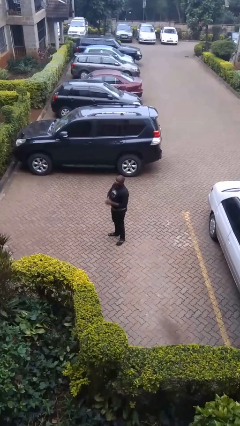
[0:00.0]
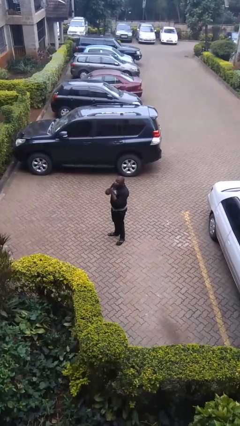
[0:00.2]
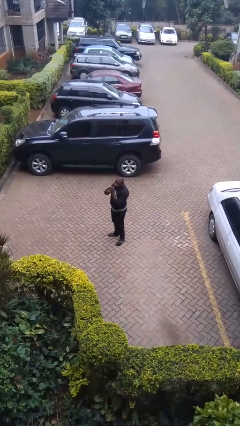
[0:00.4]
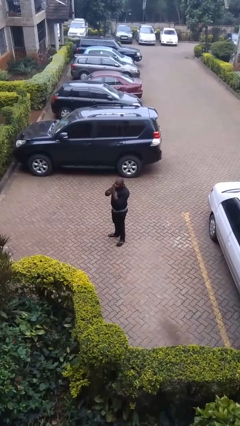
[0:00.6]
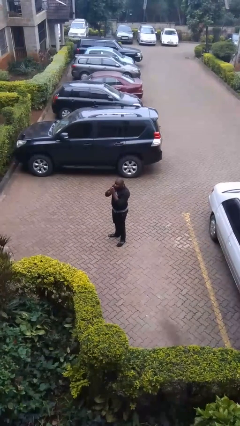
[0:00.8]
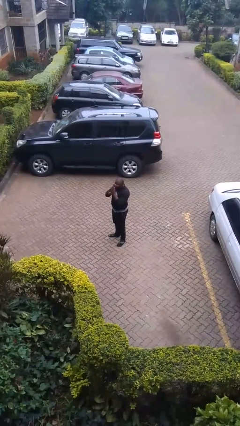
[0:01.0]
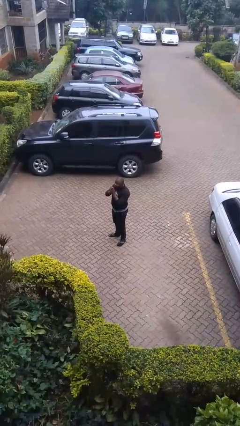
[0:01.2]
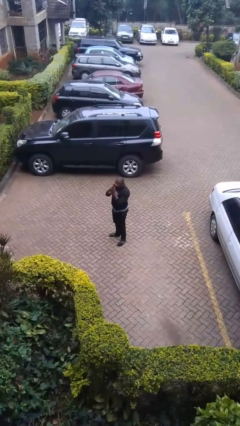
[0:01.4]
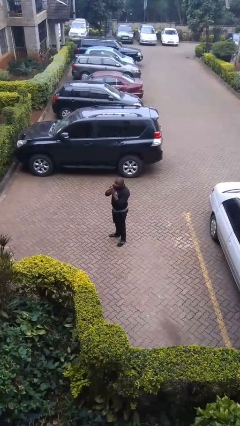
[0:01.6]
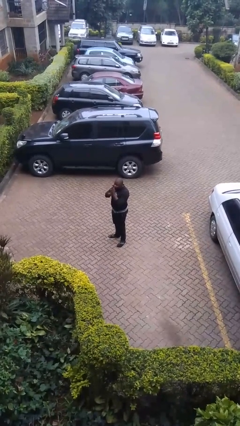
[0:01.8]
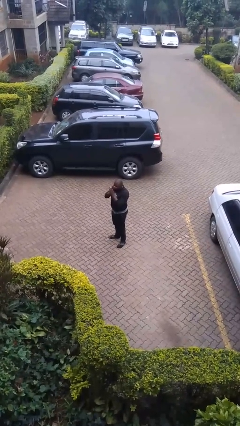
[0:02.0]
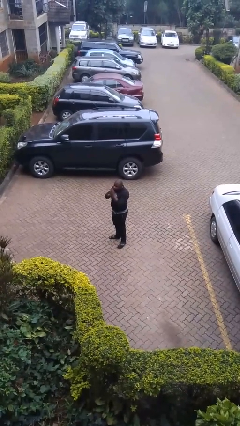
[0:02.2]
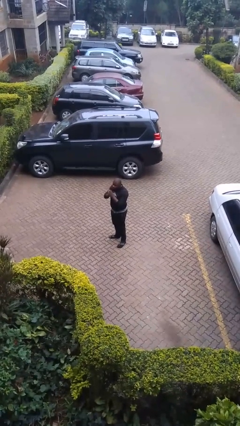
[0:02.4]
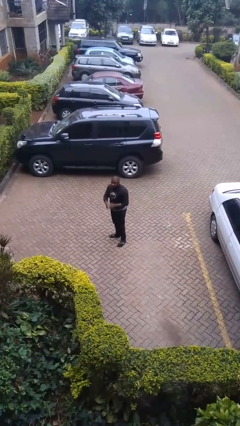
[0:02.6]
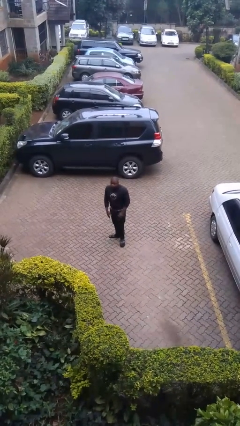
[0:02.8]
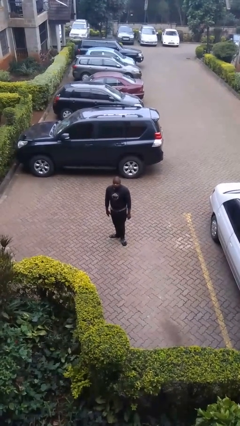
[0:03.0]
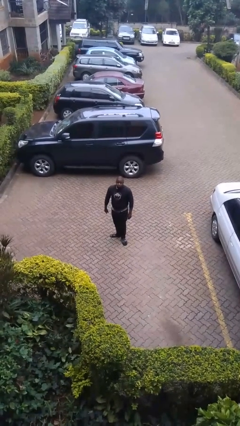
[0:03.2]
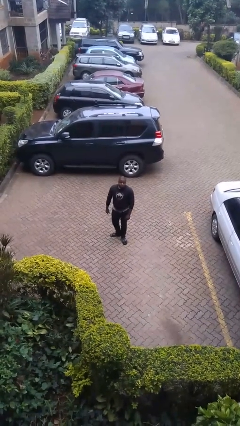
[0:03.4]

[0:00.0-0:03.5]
person blows into hands

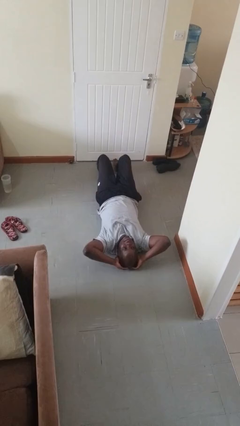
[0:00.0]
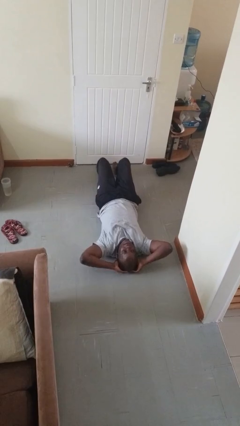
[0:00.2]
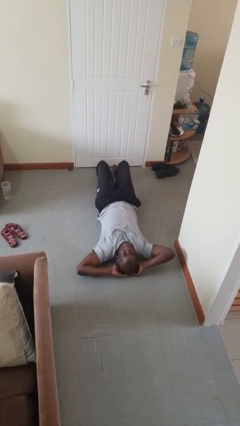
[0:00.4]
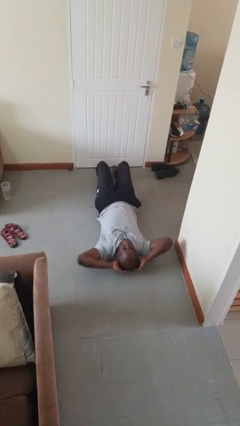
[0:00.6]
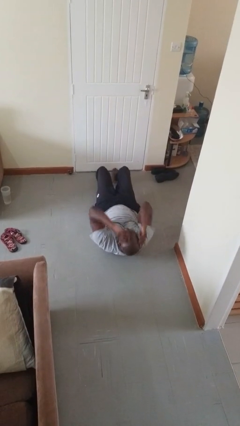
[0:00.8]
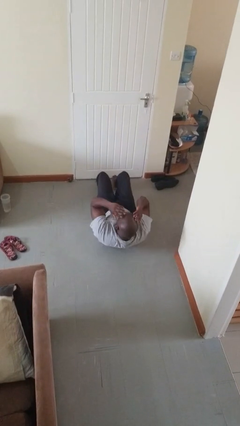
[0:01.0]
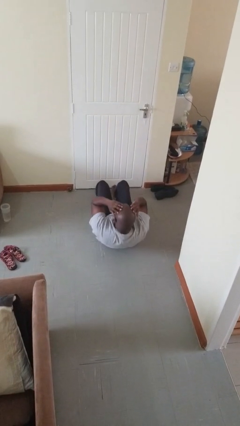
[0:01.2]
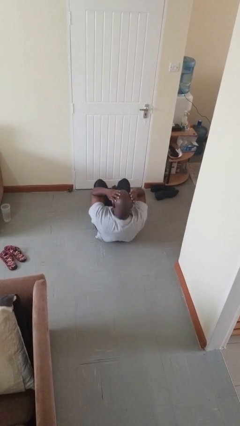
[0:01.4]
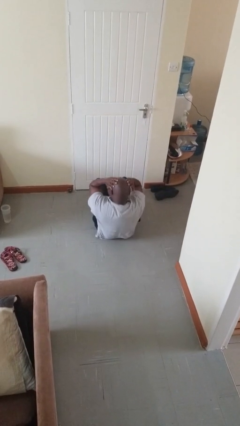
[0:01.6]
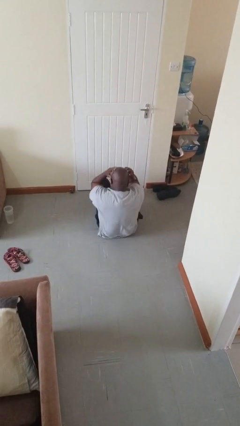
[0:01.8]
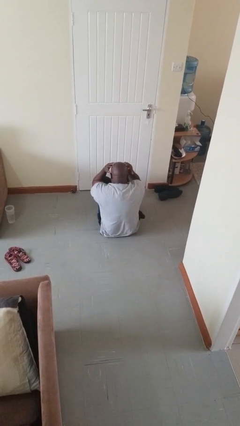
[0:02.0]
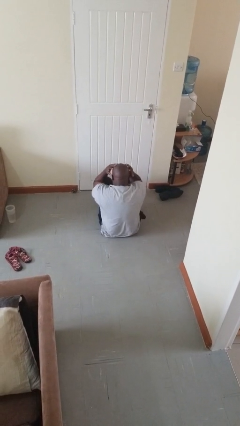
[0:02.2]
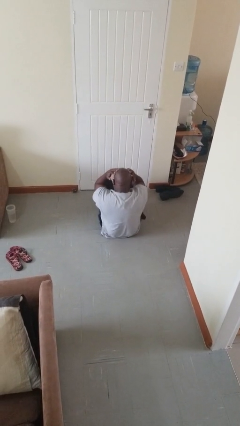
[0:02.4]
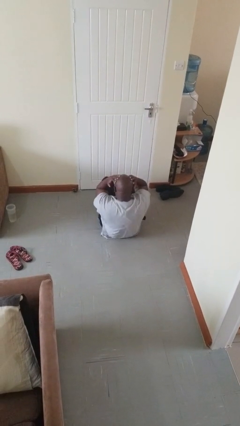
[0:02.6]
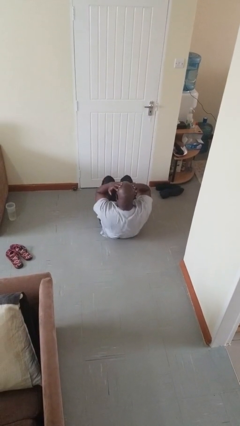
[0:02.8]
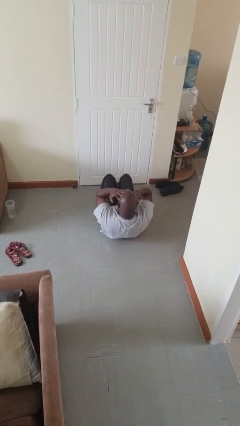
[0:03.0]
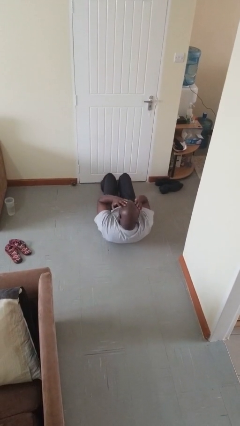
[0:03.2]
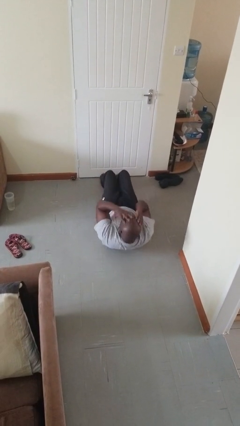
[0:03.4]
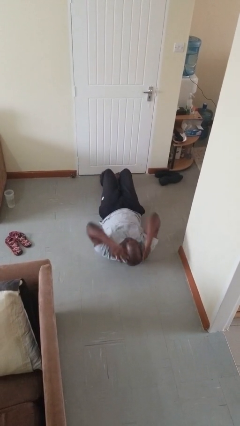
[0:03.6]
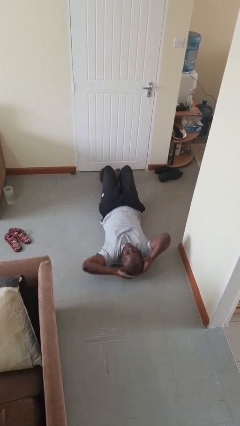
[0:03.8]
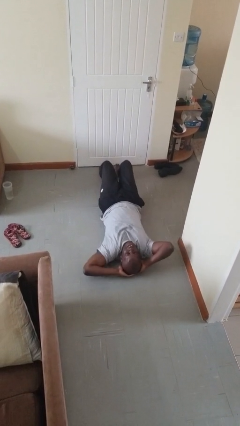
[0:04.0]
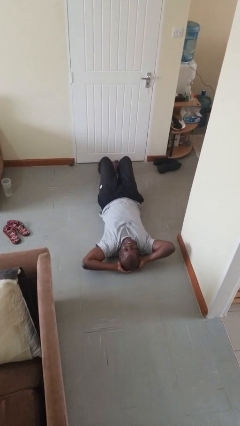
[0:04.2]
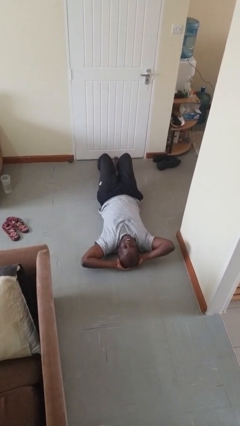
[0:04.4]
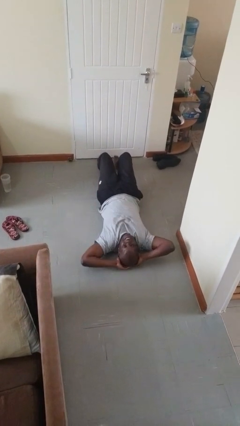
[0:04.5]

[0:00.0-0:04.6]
person exercises with situp

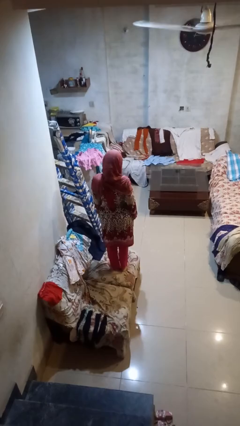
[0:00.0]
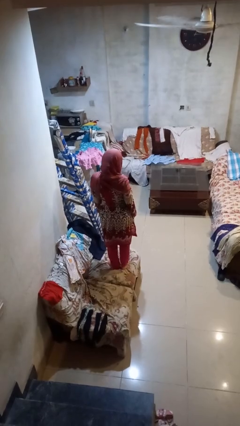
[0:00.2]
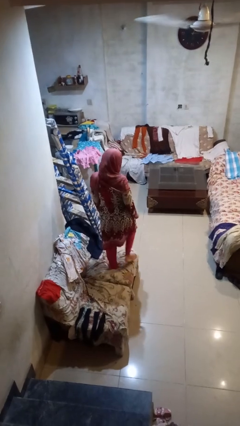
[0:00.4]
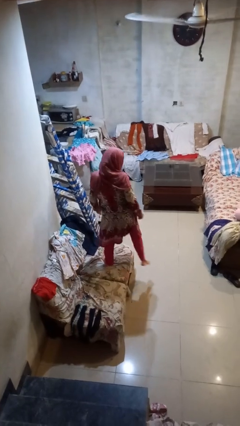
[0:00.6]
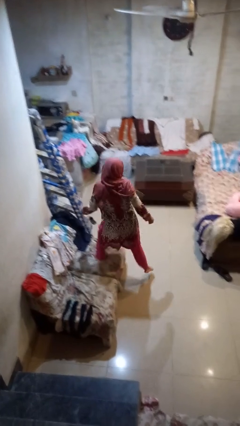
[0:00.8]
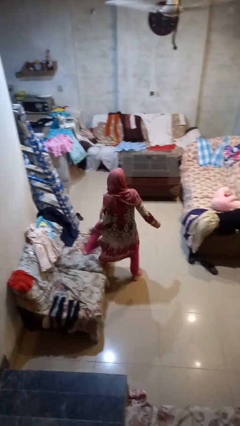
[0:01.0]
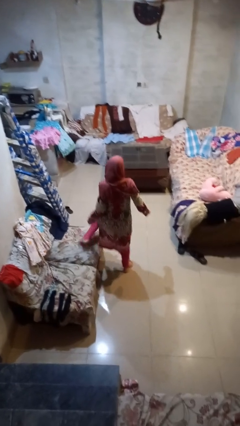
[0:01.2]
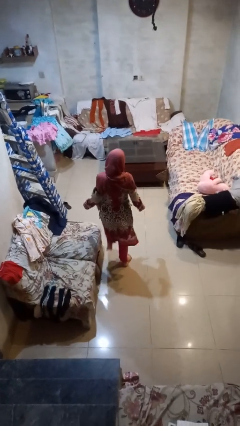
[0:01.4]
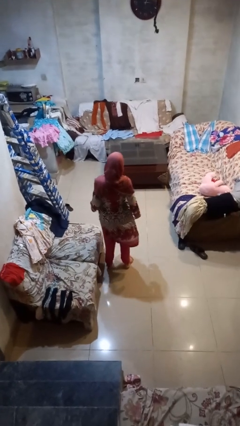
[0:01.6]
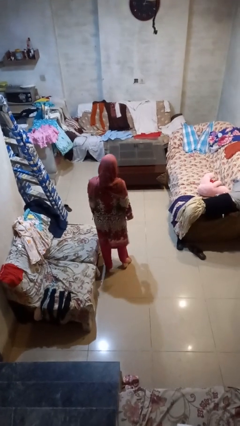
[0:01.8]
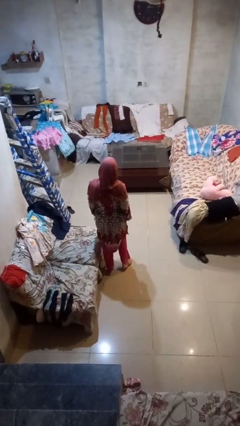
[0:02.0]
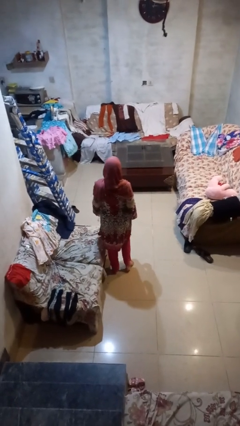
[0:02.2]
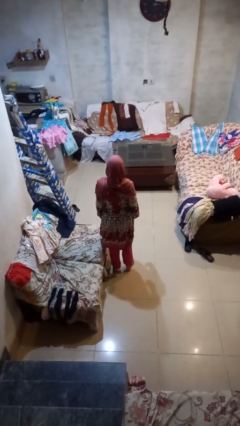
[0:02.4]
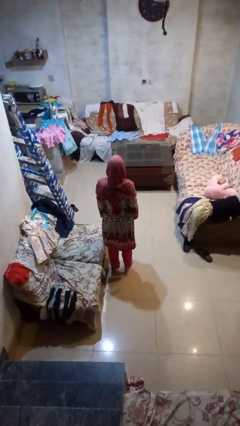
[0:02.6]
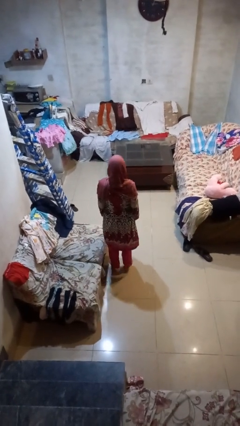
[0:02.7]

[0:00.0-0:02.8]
person climbs off couch

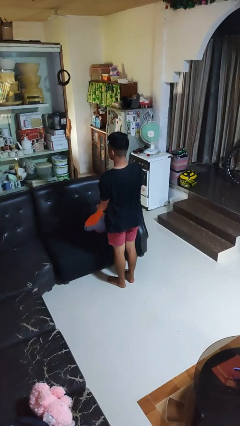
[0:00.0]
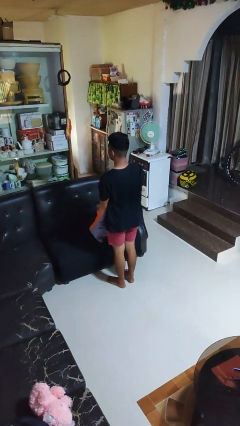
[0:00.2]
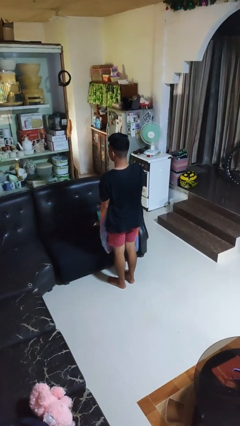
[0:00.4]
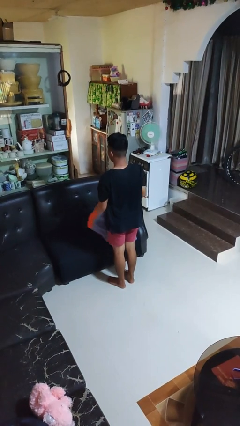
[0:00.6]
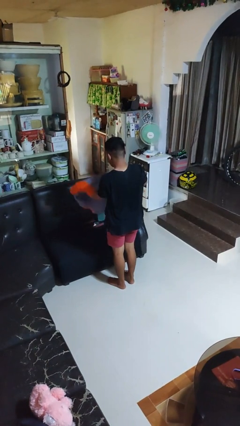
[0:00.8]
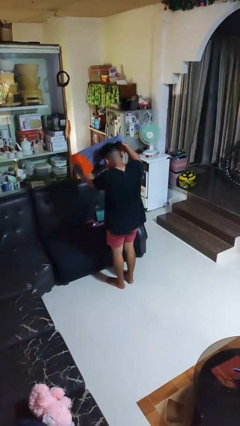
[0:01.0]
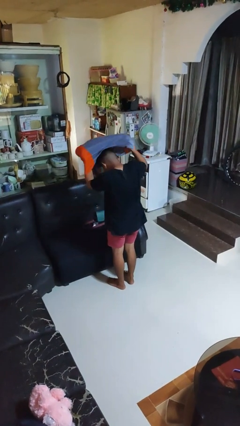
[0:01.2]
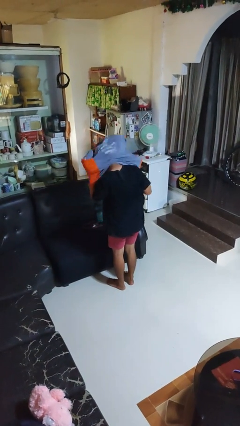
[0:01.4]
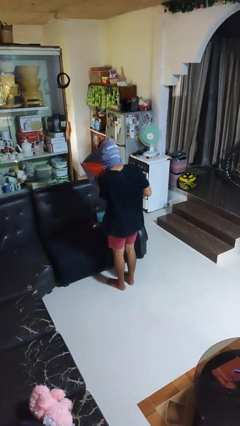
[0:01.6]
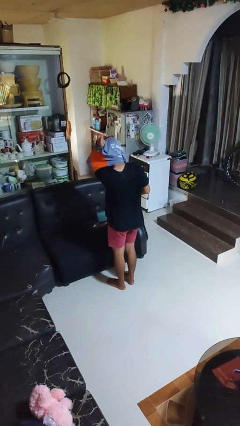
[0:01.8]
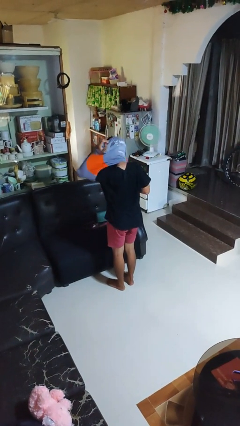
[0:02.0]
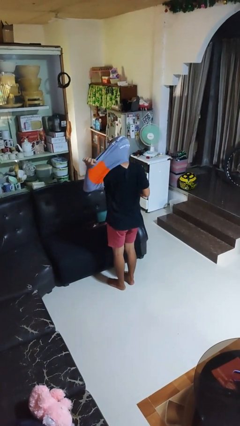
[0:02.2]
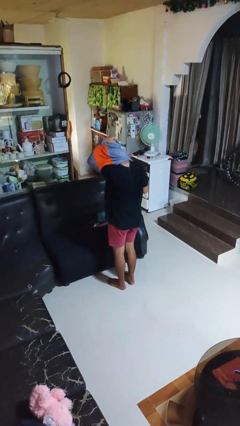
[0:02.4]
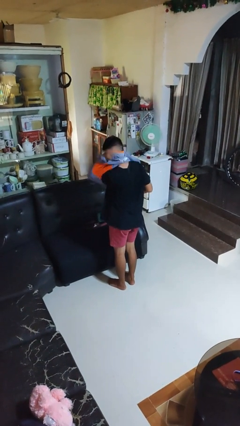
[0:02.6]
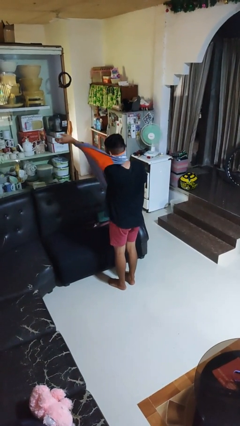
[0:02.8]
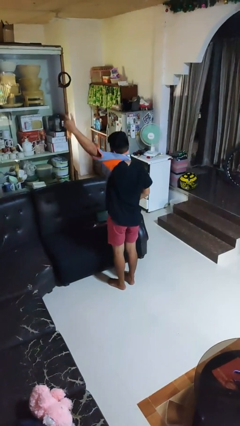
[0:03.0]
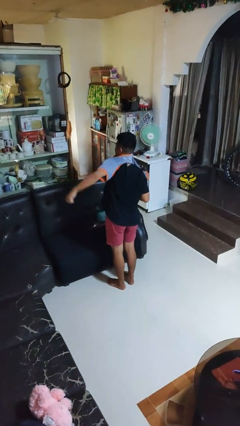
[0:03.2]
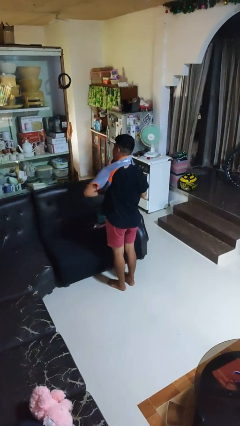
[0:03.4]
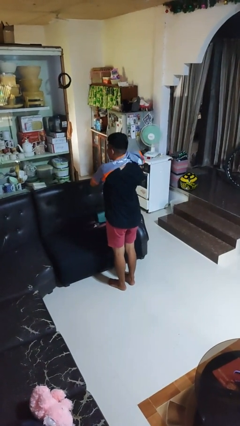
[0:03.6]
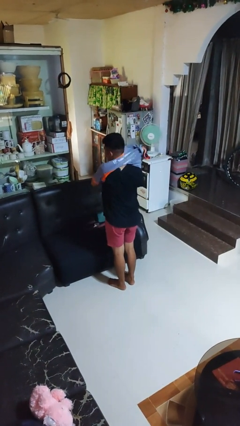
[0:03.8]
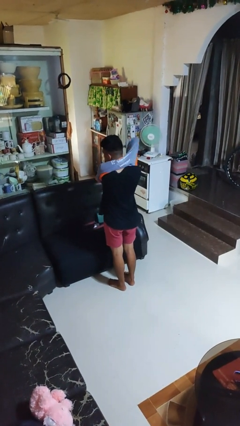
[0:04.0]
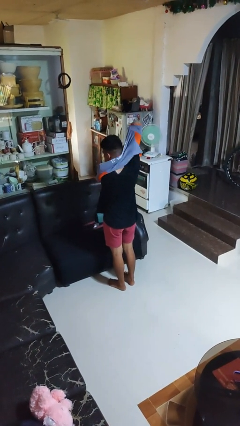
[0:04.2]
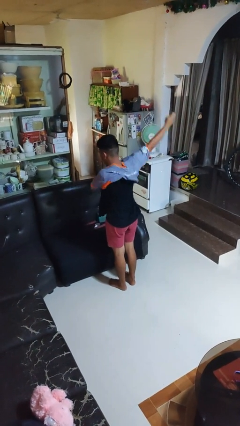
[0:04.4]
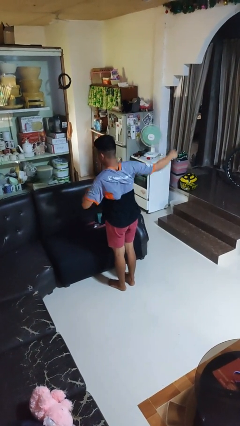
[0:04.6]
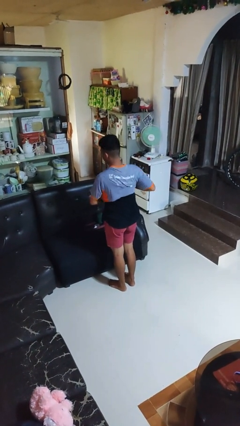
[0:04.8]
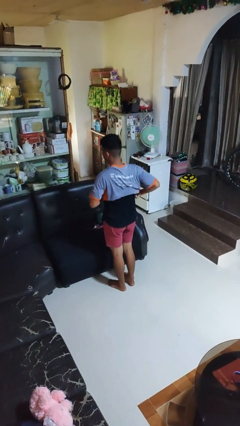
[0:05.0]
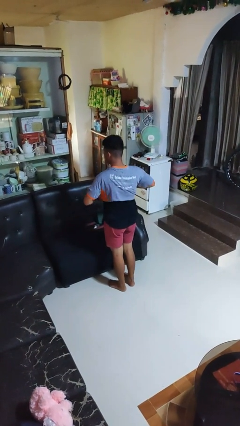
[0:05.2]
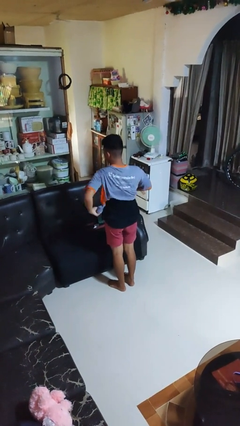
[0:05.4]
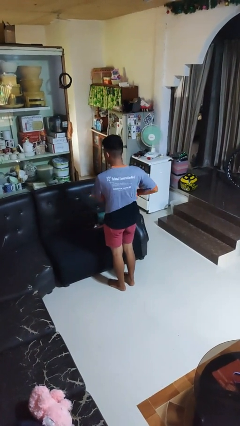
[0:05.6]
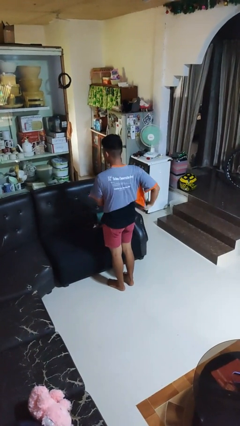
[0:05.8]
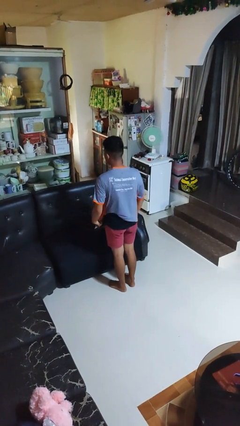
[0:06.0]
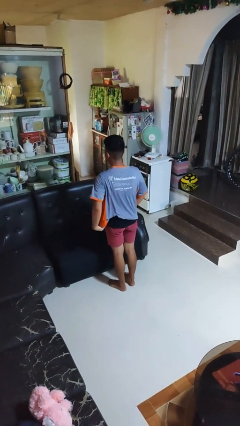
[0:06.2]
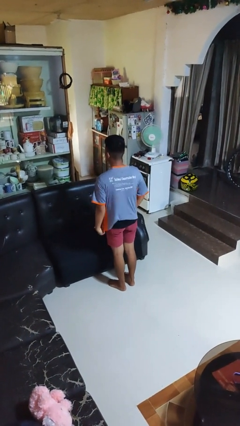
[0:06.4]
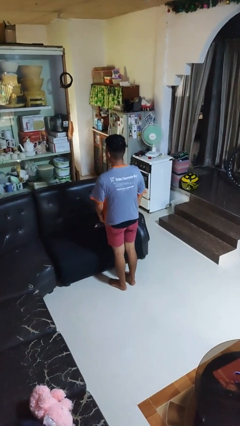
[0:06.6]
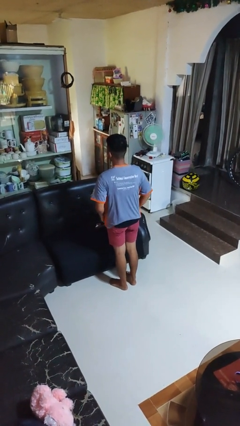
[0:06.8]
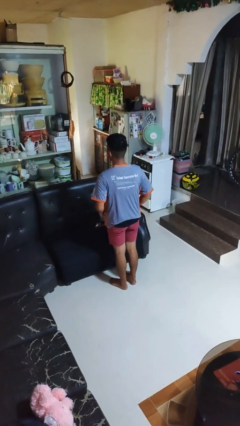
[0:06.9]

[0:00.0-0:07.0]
person puts on shirt

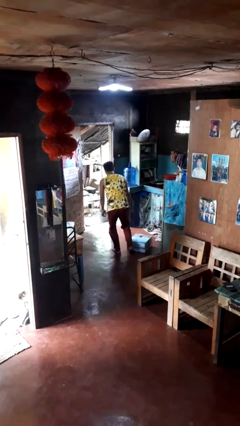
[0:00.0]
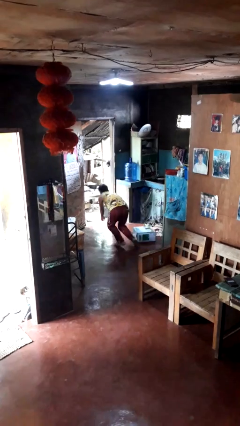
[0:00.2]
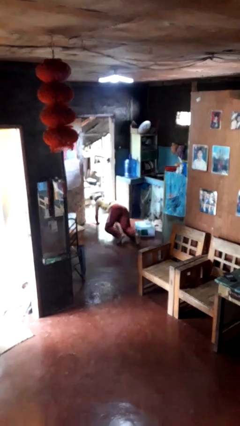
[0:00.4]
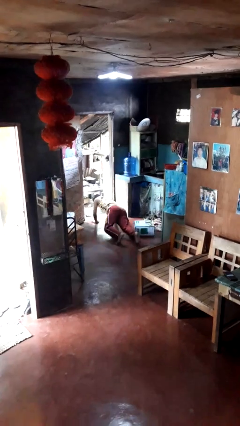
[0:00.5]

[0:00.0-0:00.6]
person trips on object on floor
